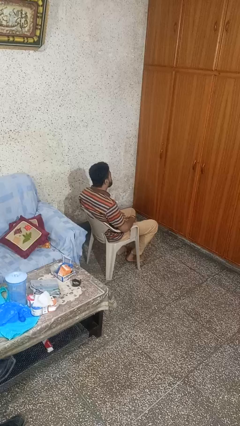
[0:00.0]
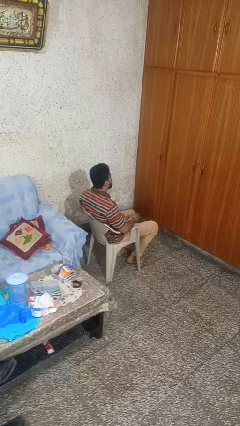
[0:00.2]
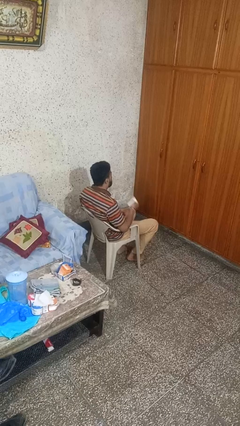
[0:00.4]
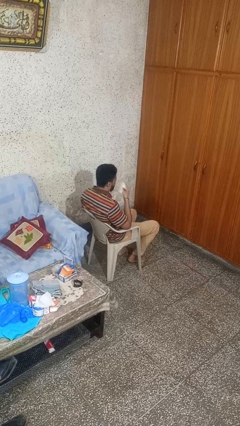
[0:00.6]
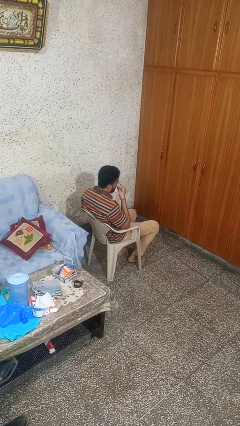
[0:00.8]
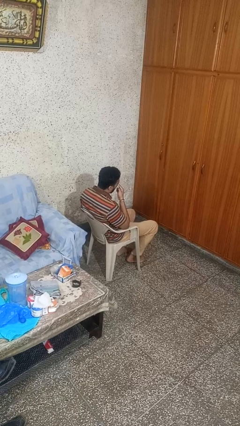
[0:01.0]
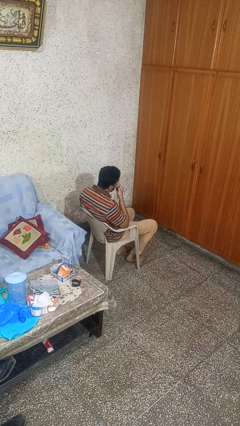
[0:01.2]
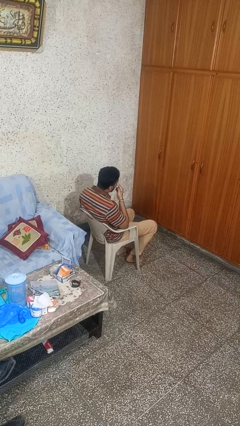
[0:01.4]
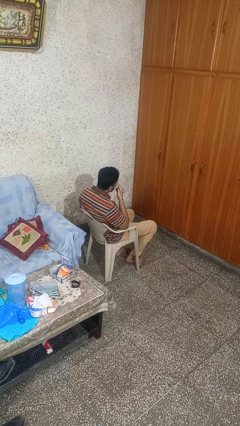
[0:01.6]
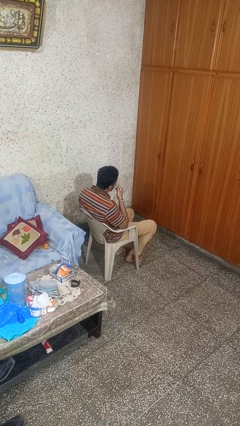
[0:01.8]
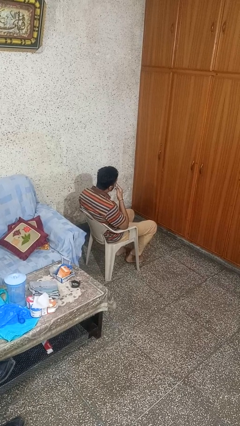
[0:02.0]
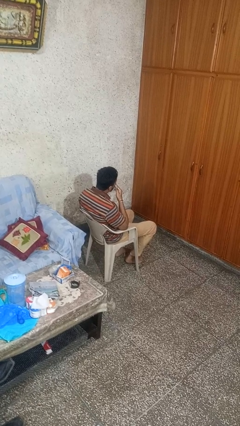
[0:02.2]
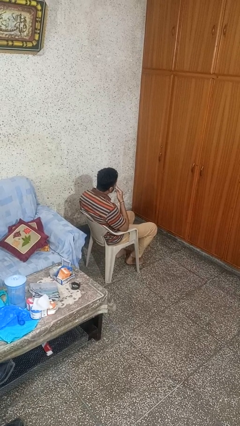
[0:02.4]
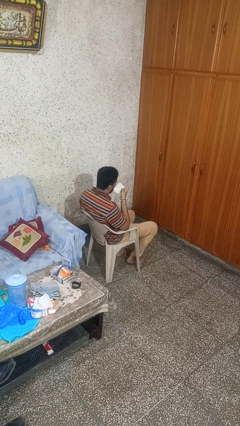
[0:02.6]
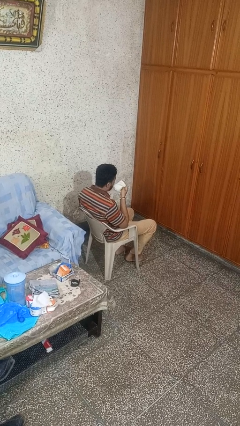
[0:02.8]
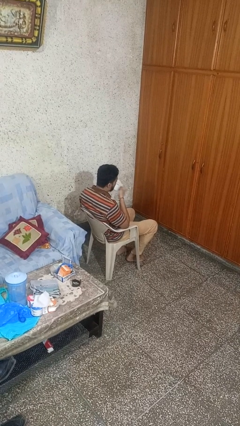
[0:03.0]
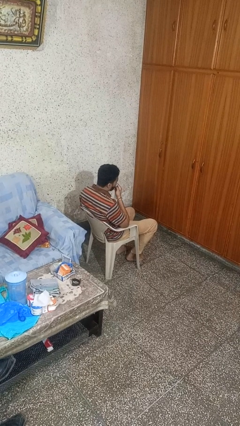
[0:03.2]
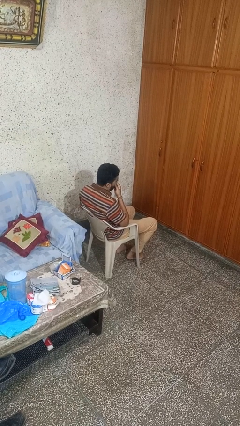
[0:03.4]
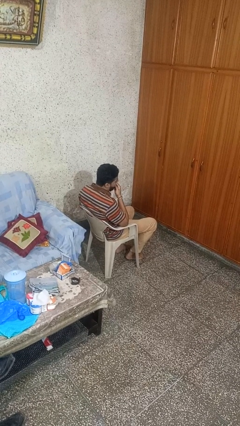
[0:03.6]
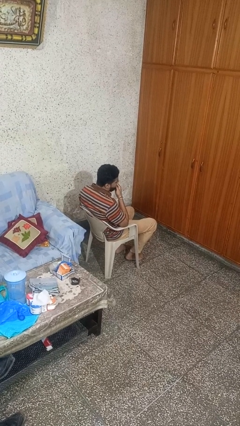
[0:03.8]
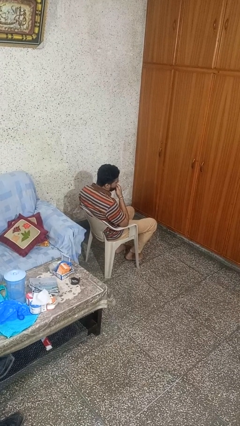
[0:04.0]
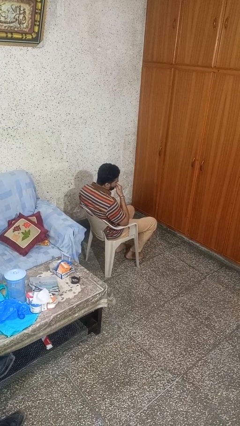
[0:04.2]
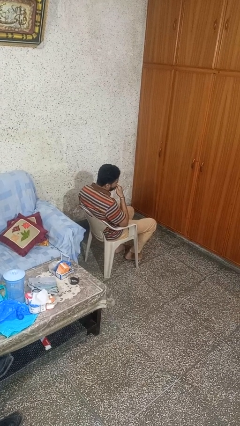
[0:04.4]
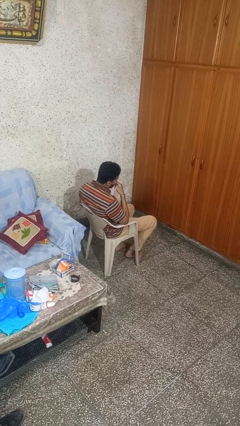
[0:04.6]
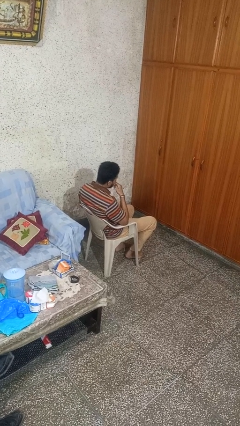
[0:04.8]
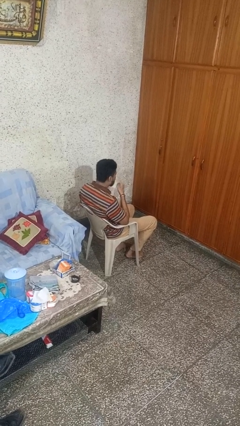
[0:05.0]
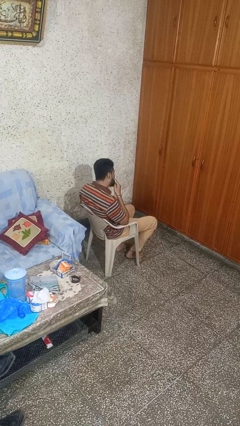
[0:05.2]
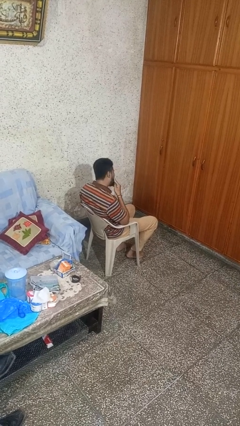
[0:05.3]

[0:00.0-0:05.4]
person wipes mouth with napkin

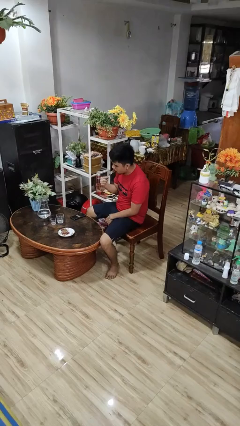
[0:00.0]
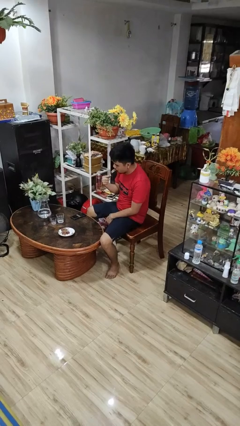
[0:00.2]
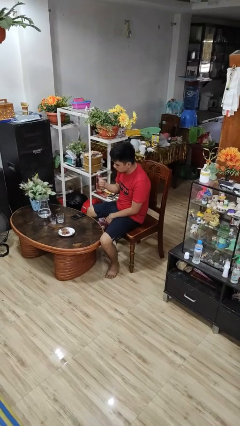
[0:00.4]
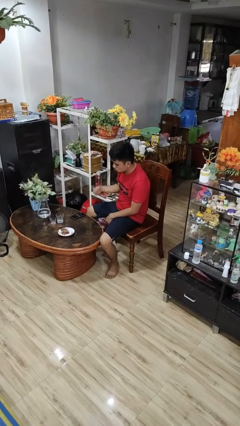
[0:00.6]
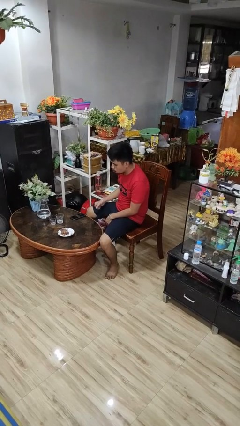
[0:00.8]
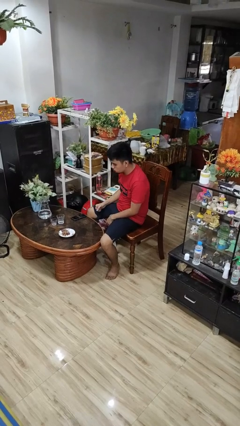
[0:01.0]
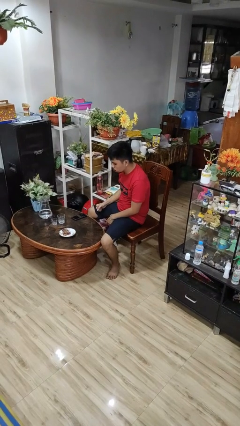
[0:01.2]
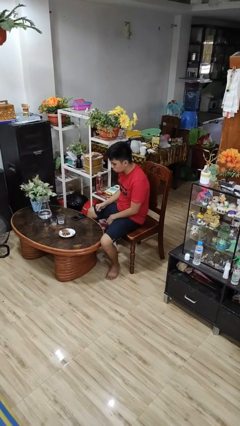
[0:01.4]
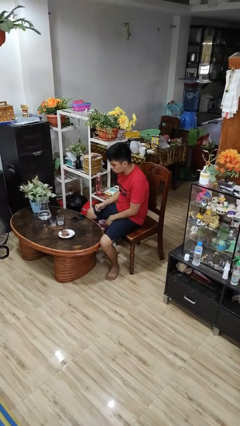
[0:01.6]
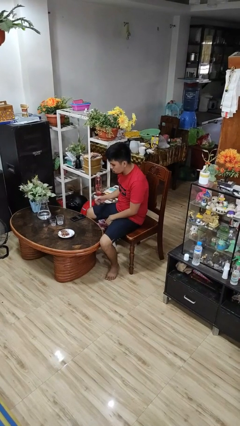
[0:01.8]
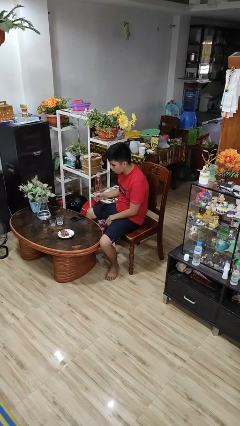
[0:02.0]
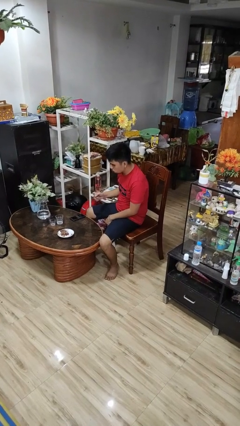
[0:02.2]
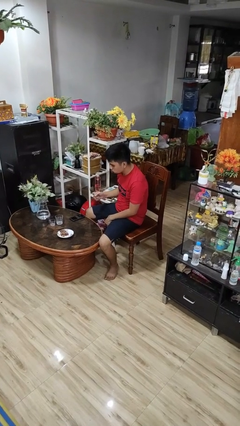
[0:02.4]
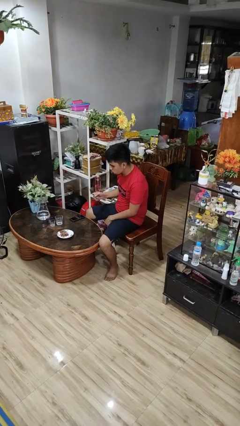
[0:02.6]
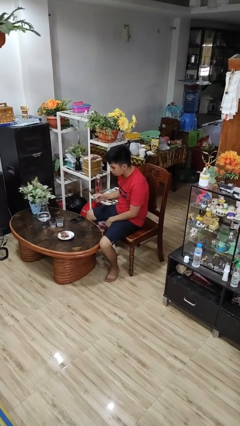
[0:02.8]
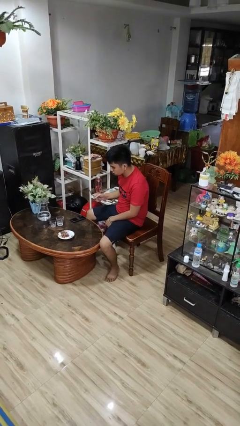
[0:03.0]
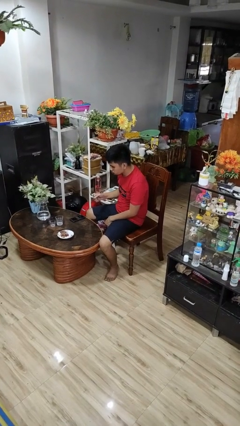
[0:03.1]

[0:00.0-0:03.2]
person eats with utensil

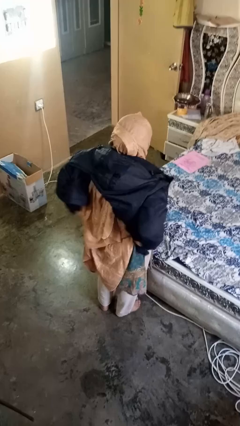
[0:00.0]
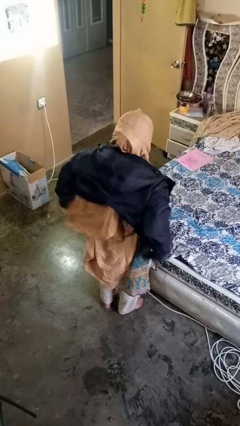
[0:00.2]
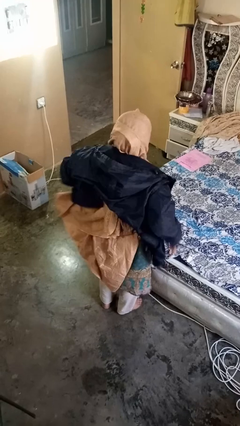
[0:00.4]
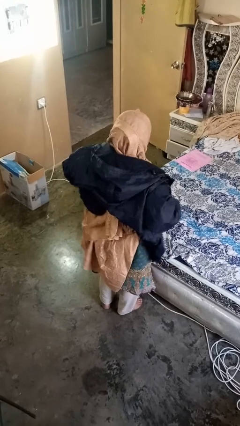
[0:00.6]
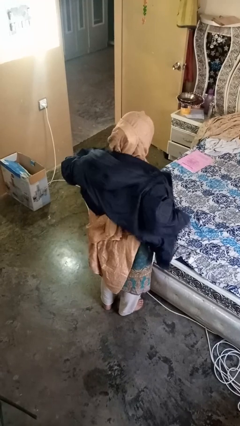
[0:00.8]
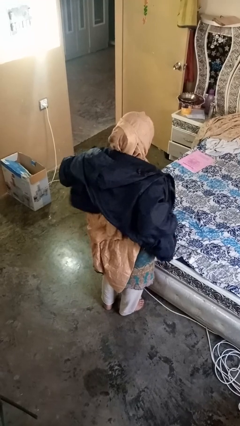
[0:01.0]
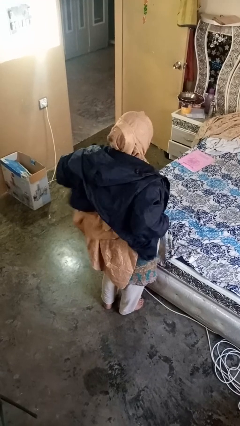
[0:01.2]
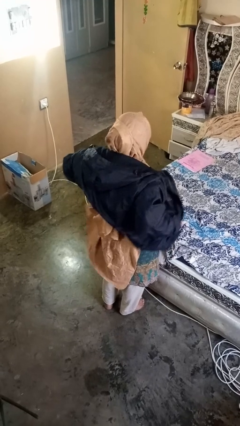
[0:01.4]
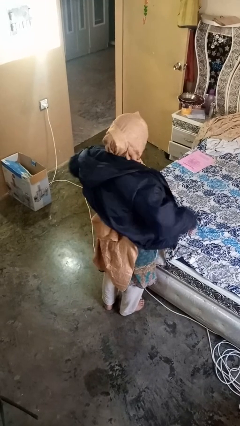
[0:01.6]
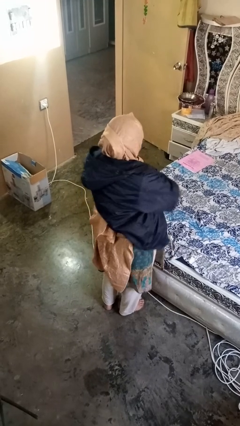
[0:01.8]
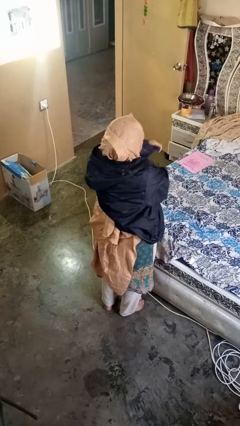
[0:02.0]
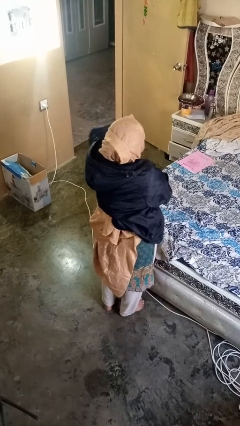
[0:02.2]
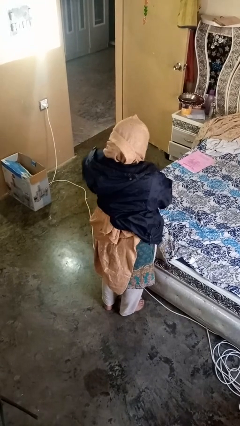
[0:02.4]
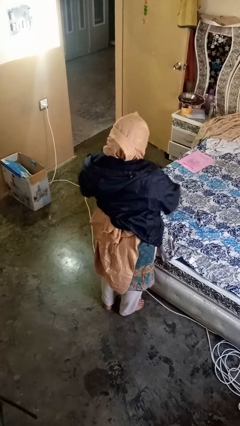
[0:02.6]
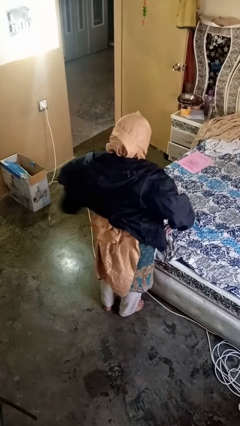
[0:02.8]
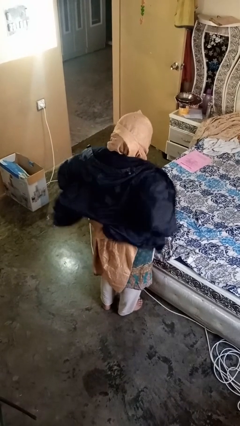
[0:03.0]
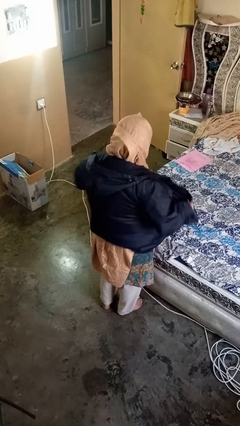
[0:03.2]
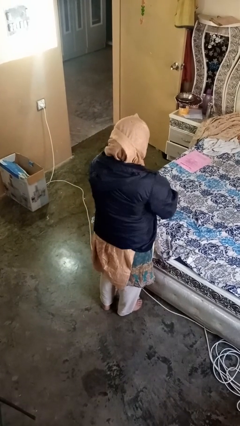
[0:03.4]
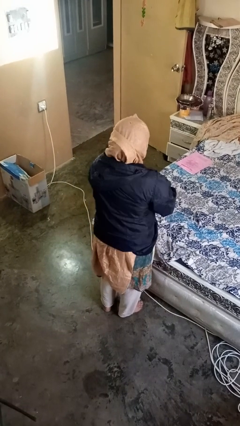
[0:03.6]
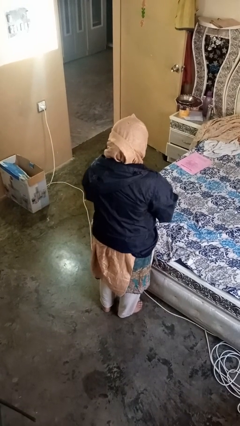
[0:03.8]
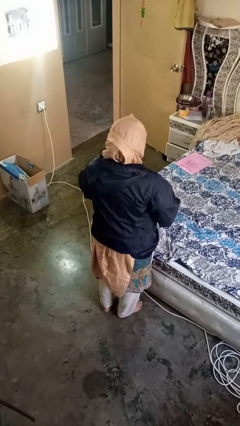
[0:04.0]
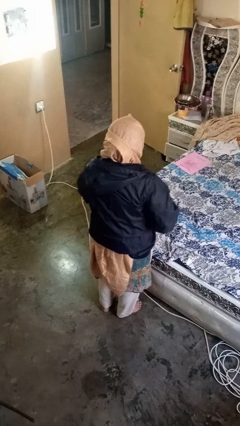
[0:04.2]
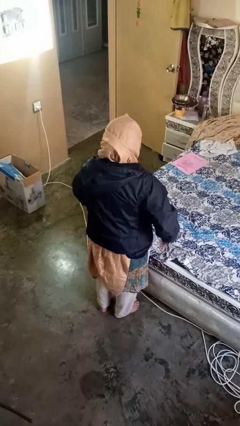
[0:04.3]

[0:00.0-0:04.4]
person zips up jacket

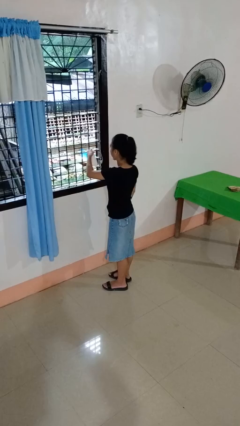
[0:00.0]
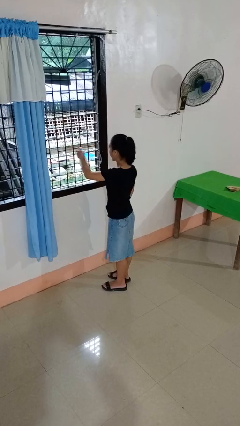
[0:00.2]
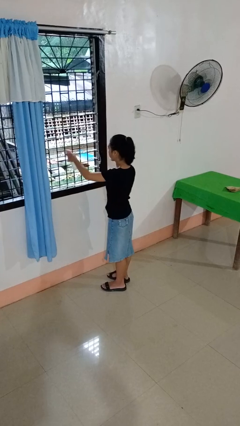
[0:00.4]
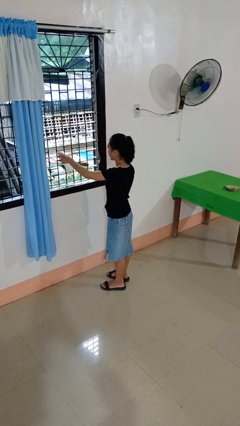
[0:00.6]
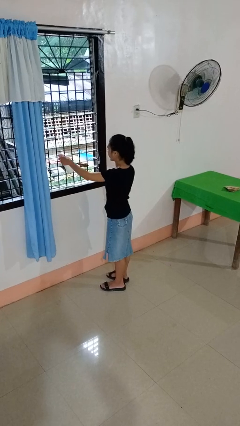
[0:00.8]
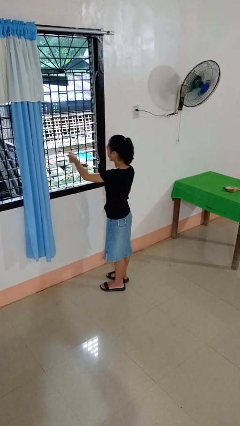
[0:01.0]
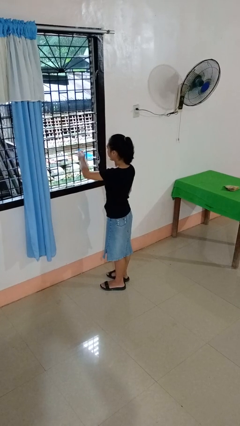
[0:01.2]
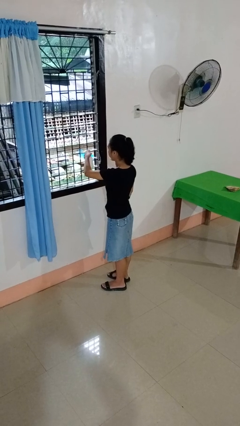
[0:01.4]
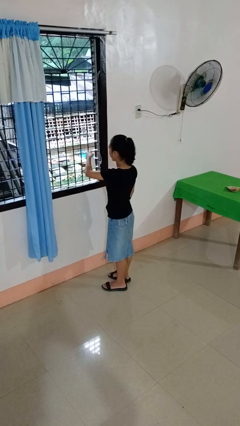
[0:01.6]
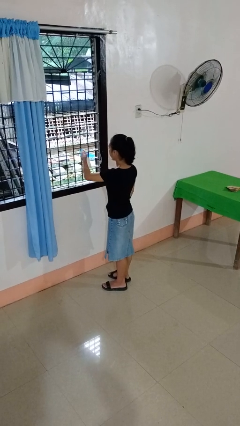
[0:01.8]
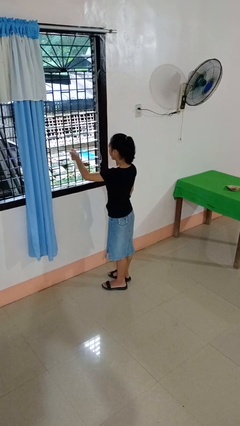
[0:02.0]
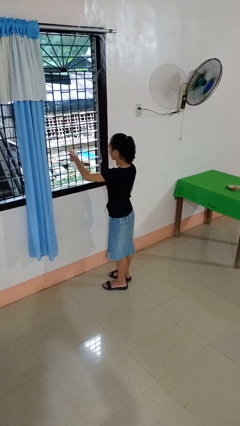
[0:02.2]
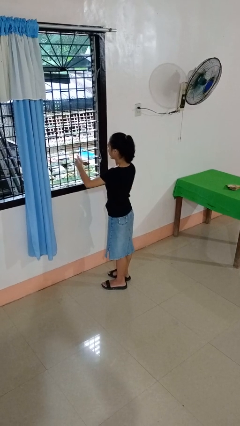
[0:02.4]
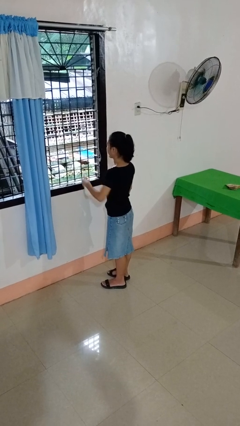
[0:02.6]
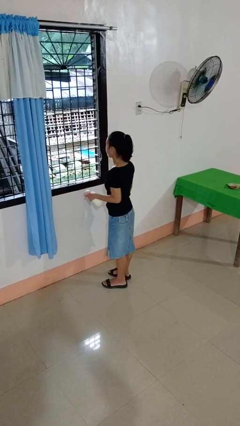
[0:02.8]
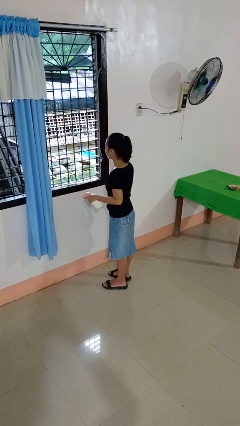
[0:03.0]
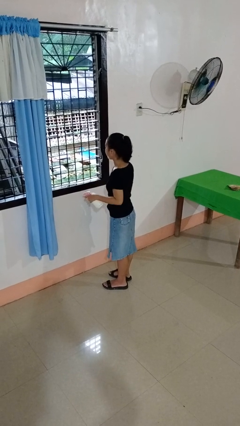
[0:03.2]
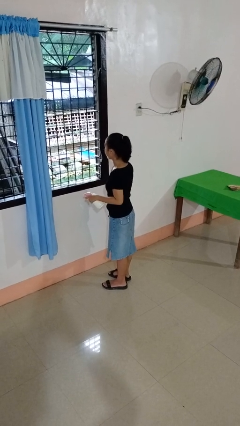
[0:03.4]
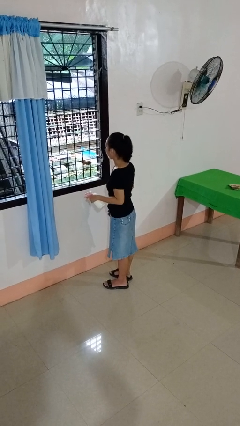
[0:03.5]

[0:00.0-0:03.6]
person sprays from bottle

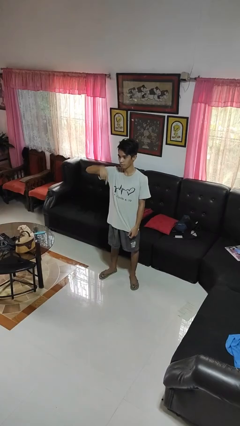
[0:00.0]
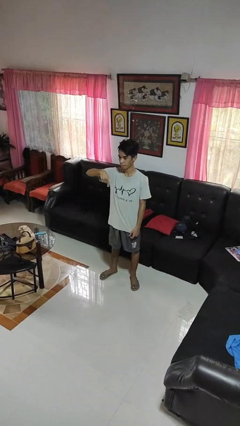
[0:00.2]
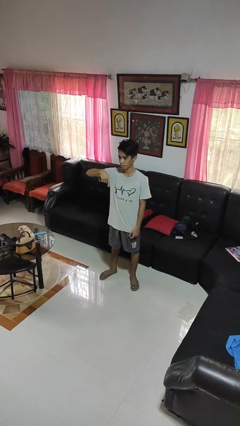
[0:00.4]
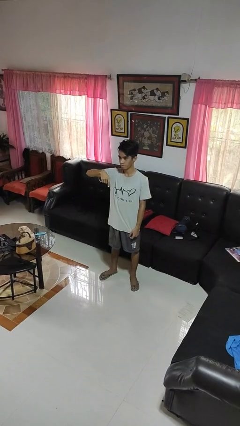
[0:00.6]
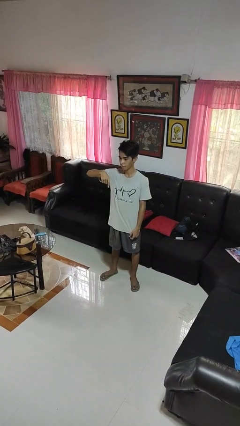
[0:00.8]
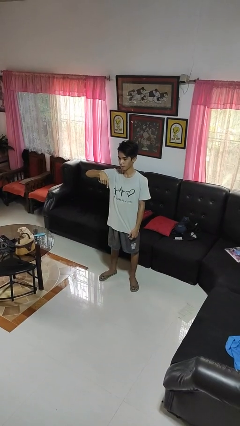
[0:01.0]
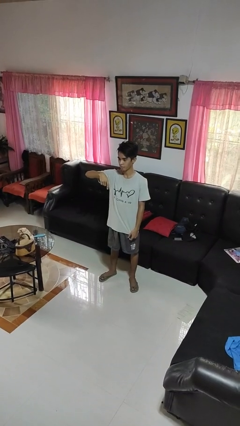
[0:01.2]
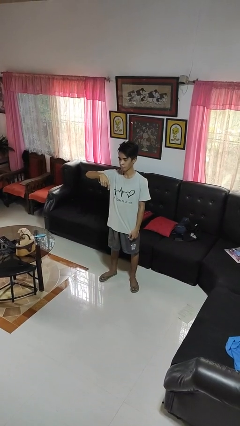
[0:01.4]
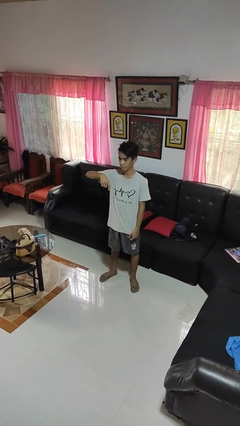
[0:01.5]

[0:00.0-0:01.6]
person gestures swipe down
